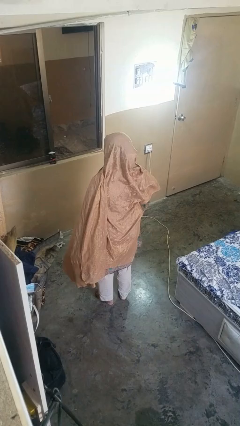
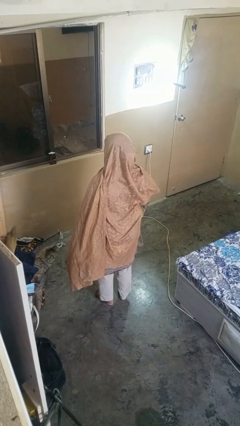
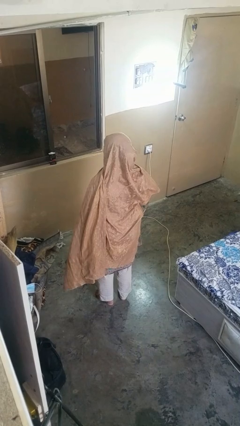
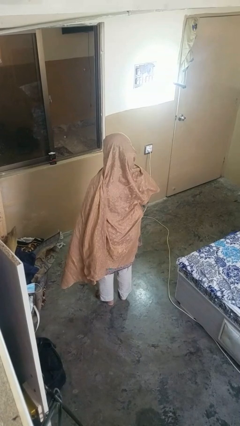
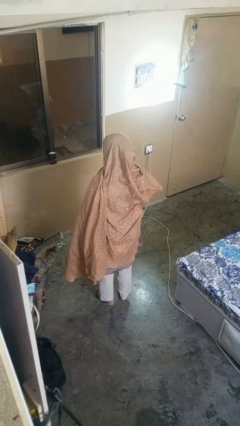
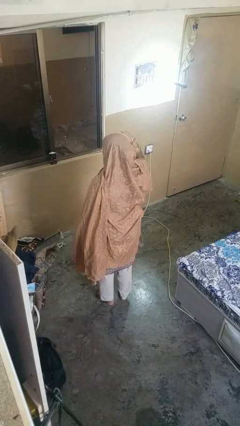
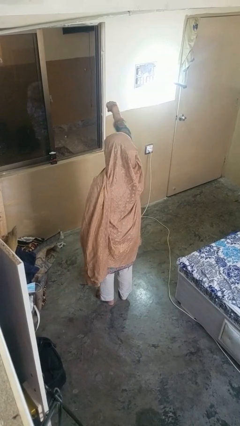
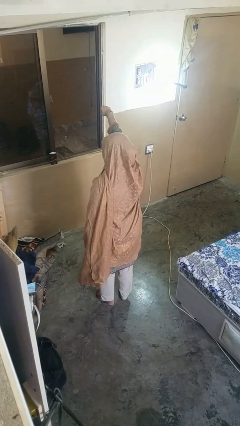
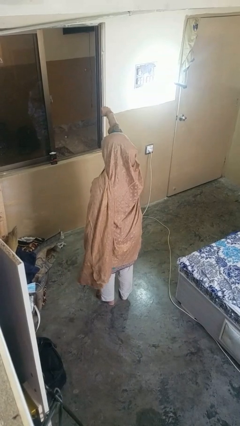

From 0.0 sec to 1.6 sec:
person punches

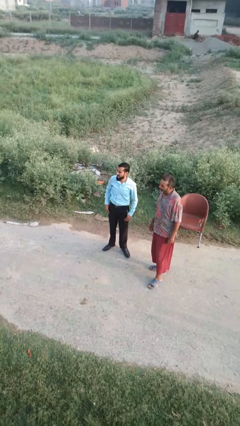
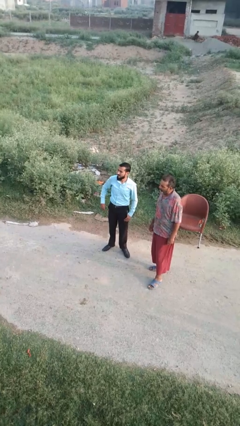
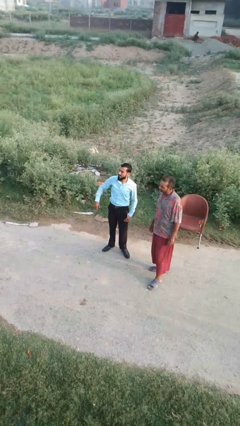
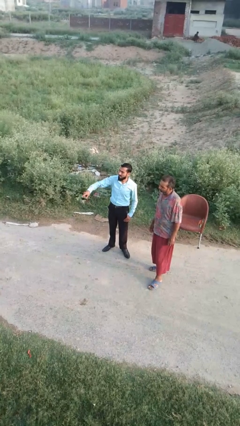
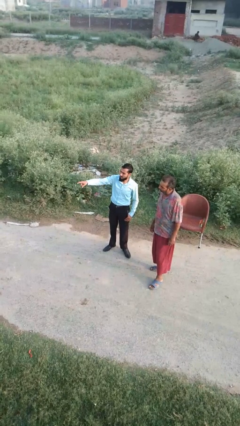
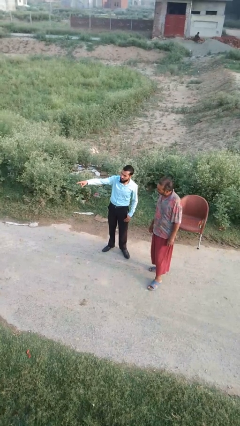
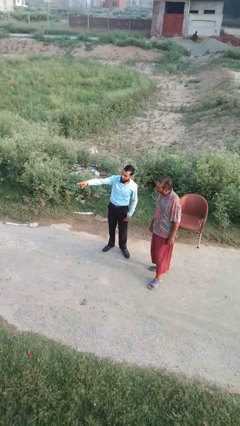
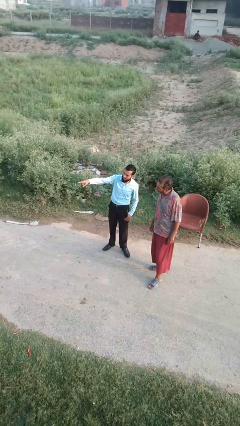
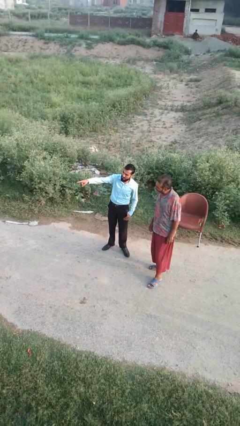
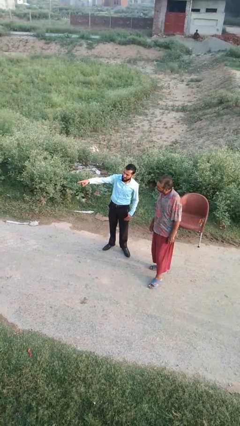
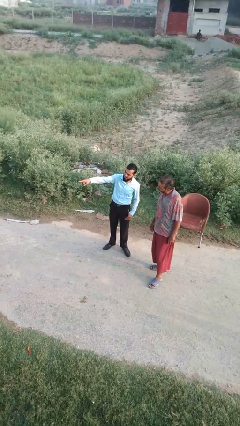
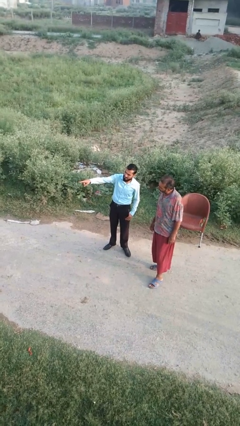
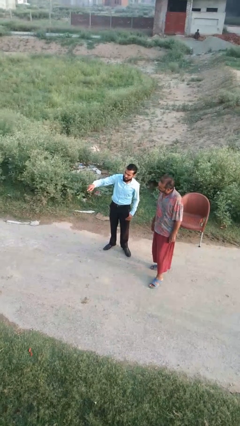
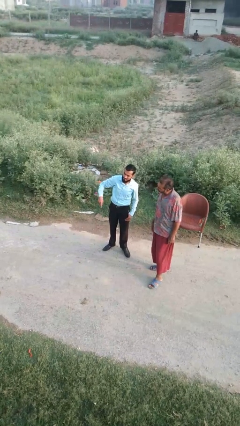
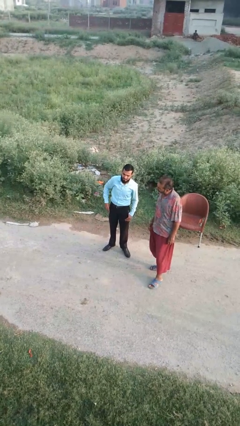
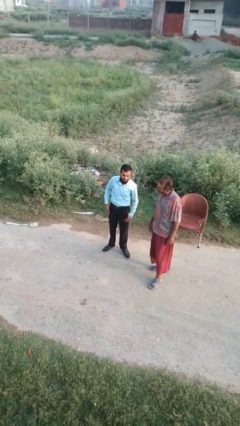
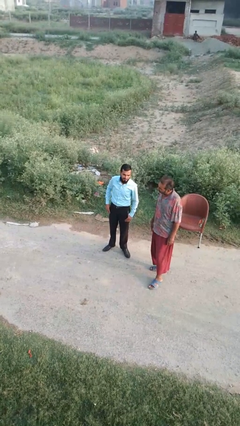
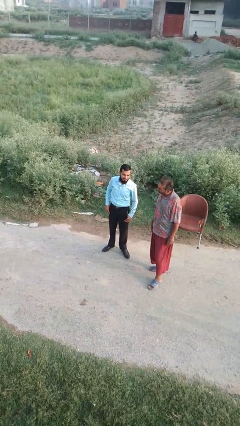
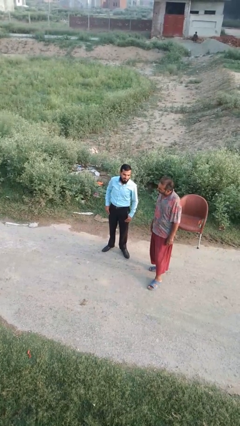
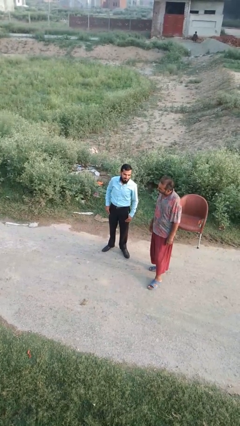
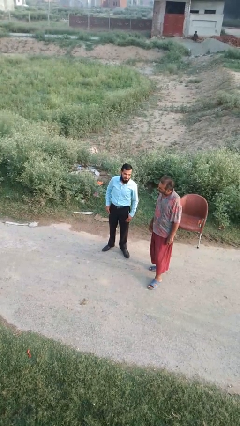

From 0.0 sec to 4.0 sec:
person points at person

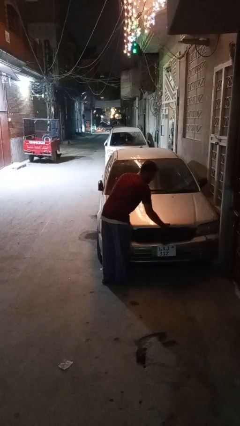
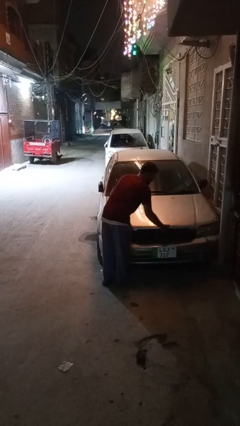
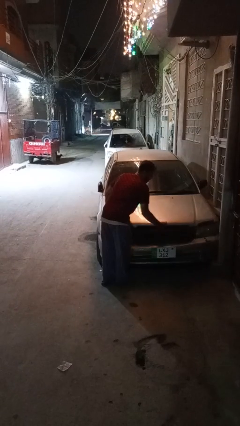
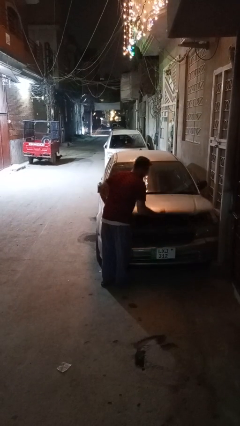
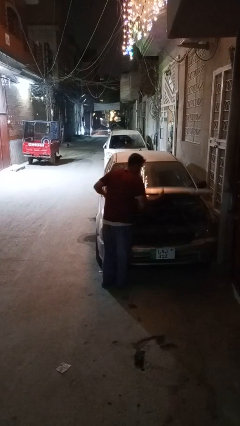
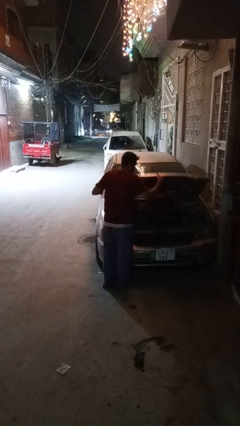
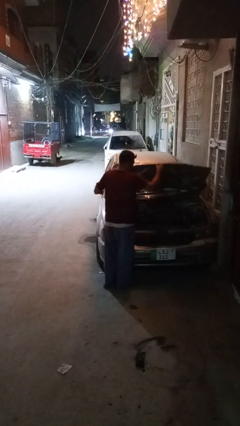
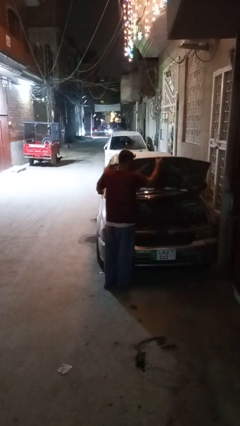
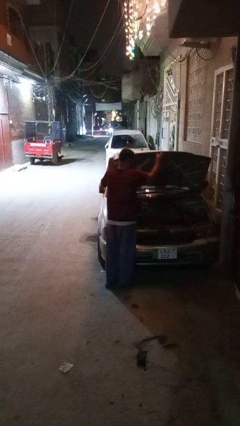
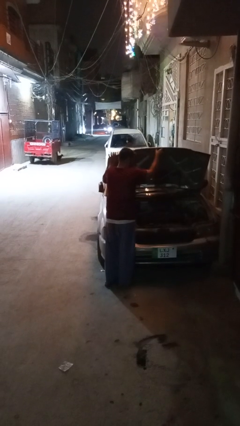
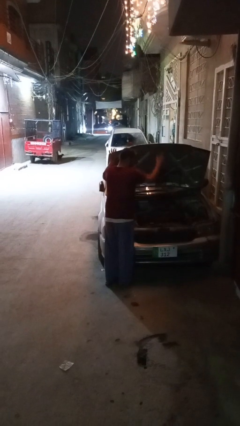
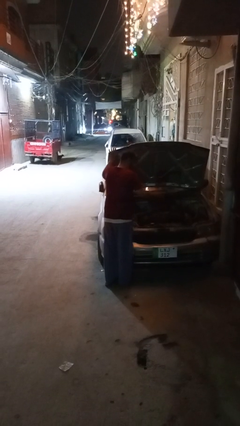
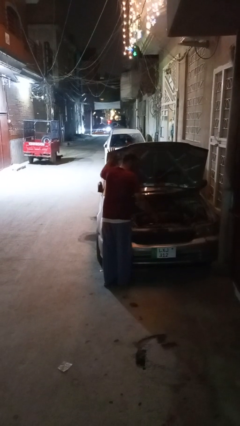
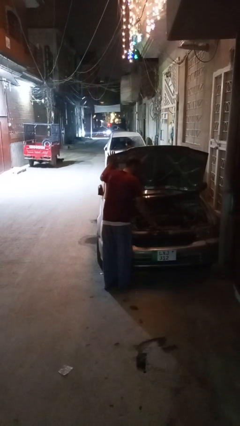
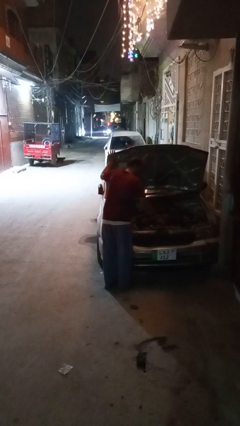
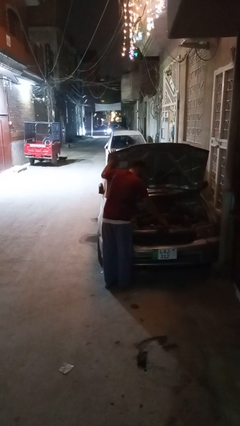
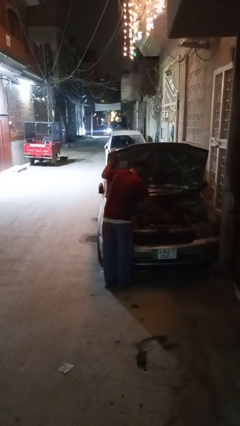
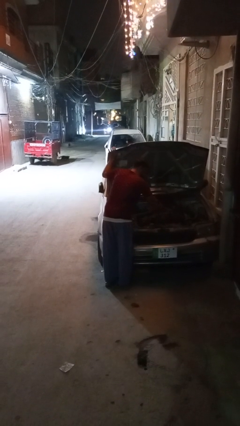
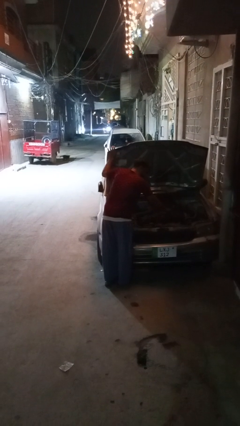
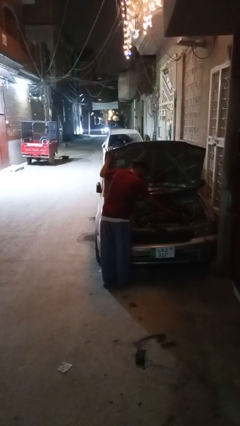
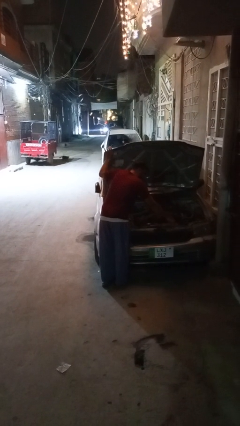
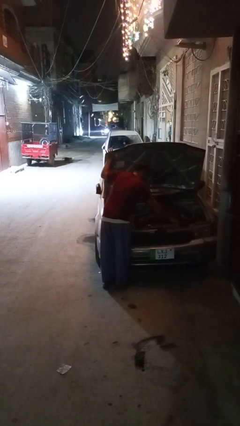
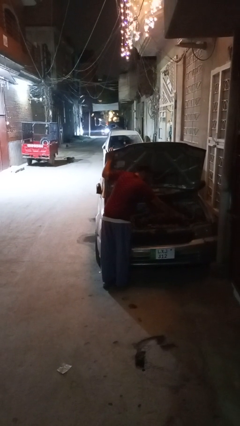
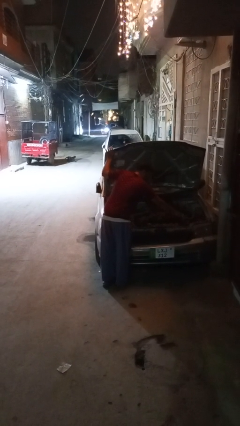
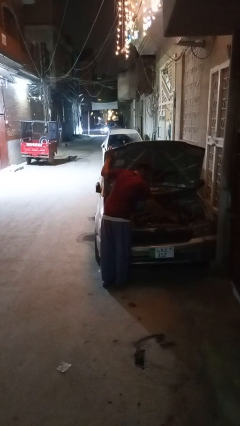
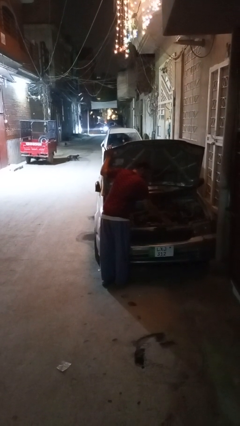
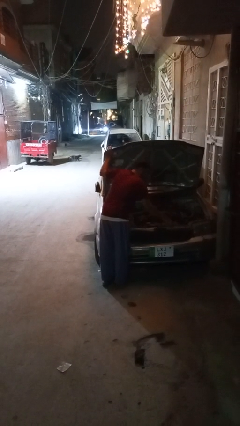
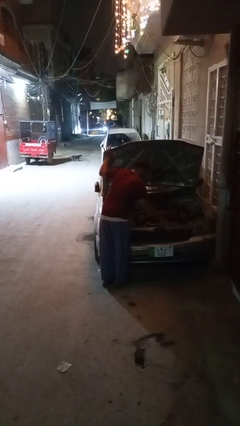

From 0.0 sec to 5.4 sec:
person opens car hood

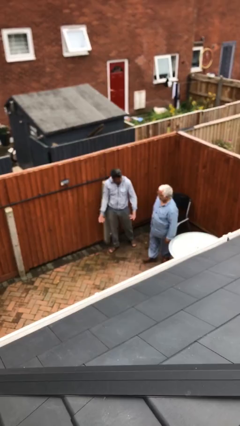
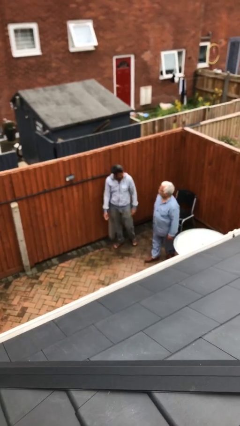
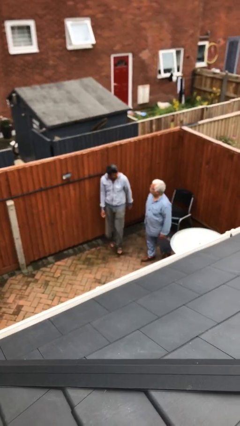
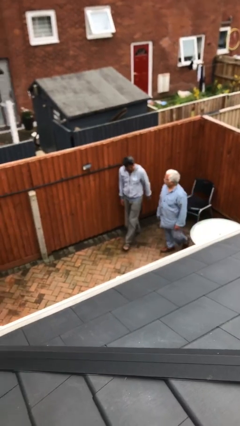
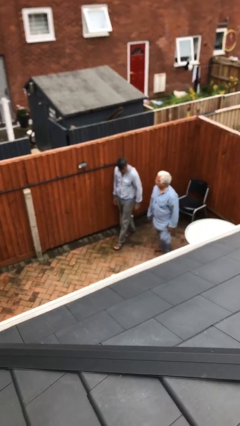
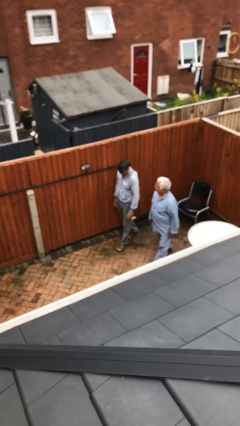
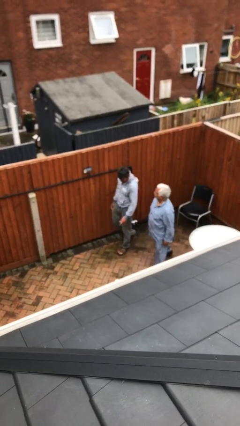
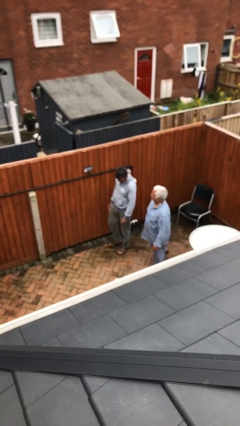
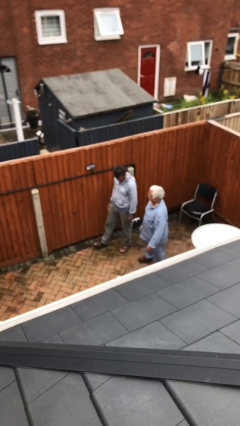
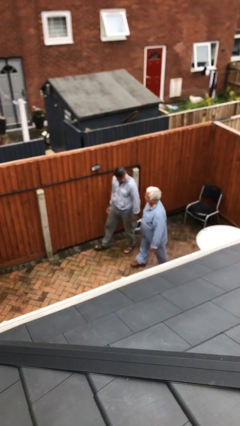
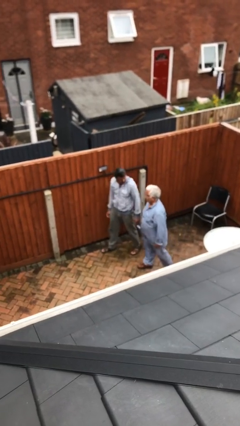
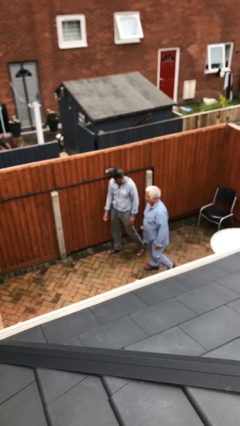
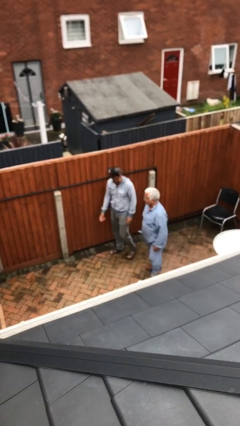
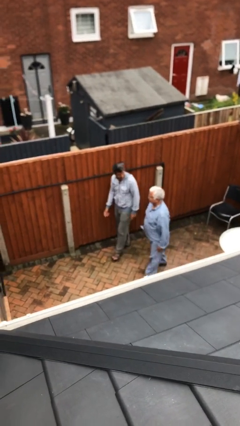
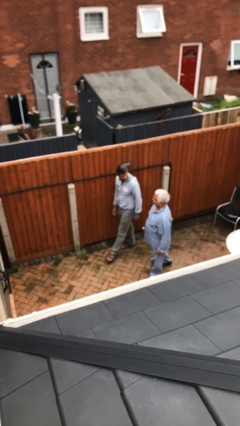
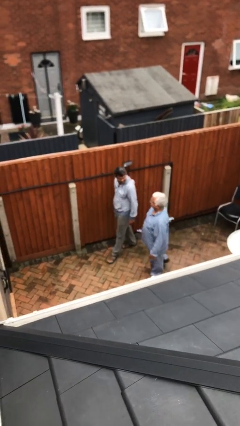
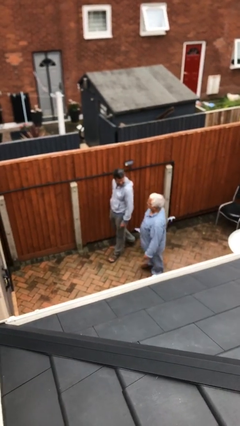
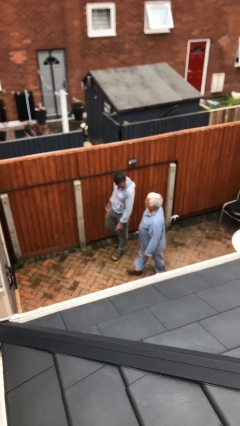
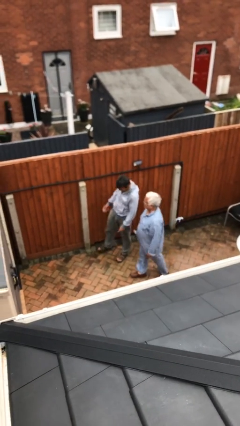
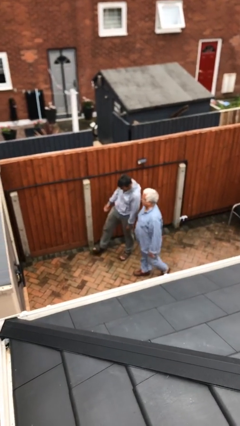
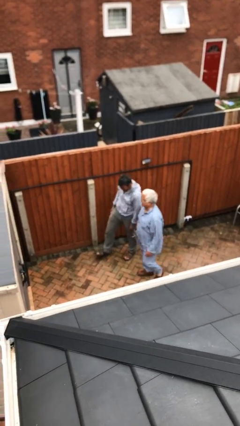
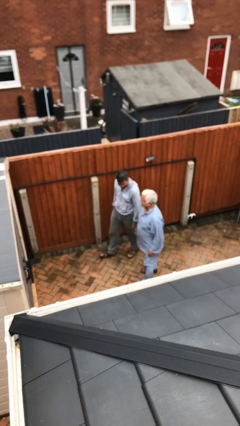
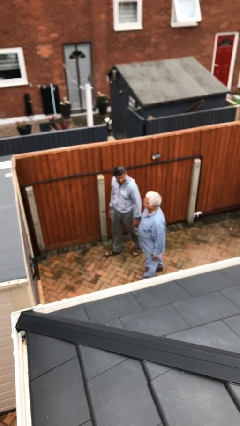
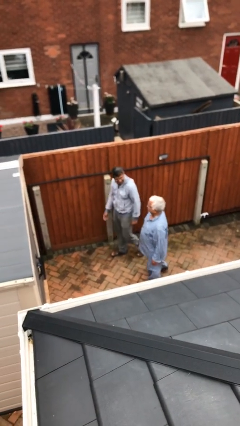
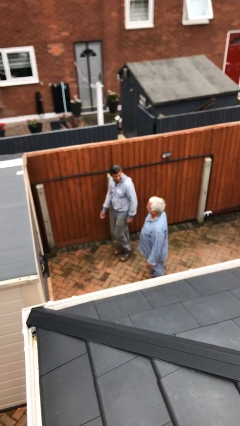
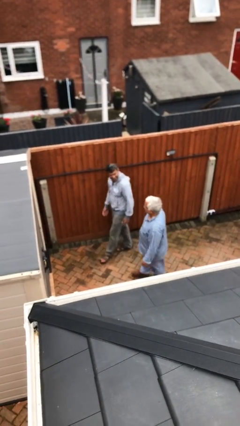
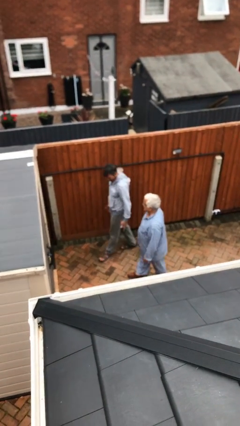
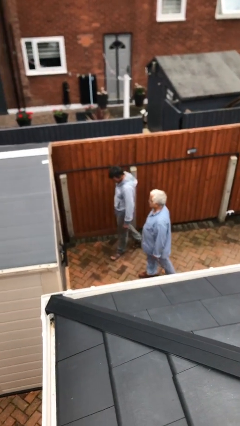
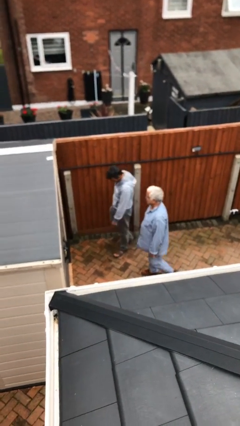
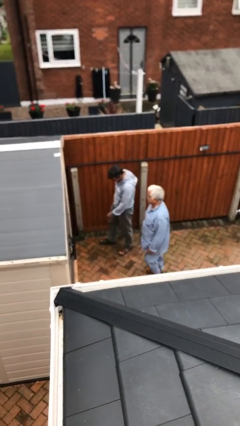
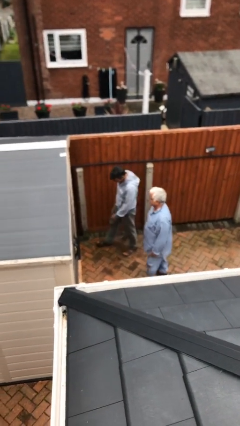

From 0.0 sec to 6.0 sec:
person talks to person

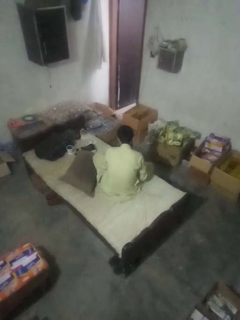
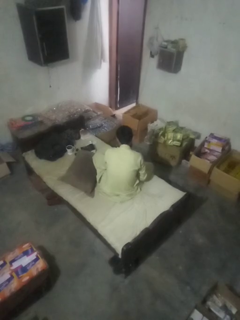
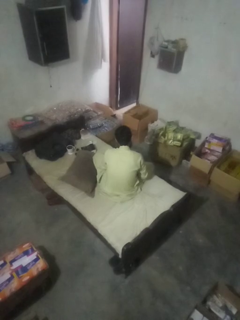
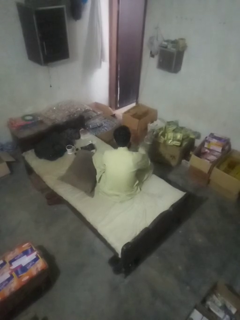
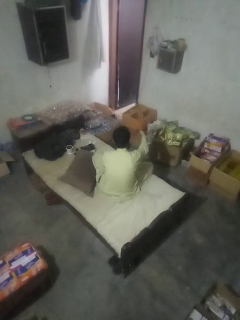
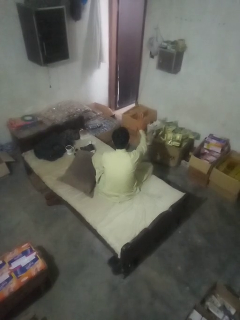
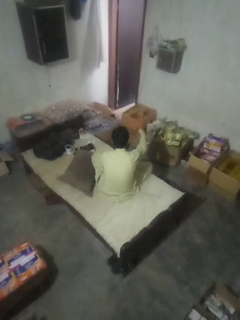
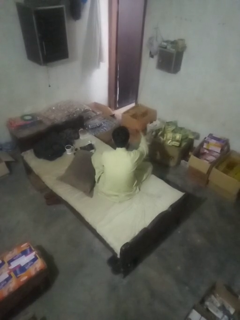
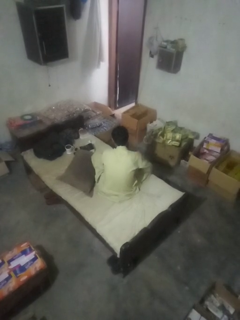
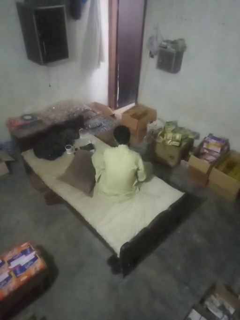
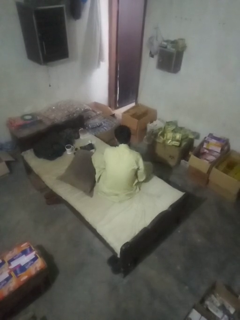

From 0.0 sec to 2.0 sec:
person gestures stop
